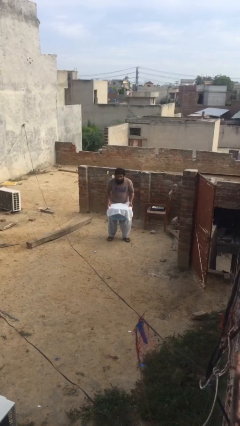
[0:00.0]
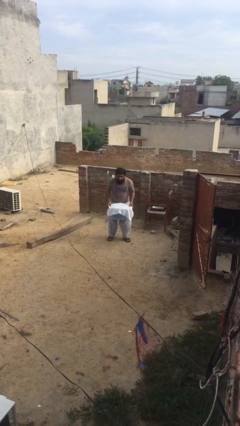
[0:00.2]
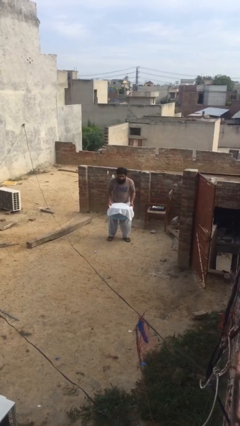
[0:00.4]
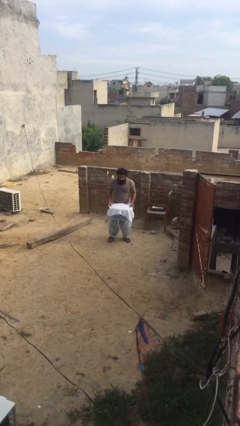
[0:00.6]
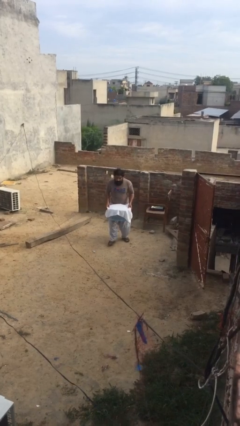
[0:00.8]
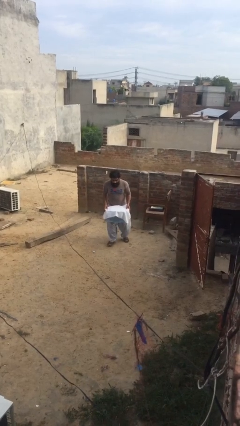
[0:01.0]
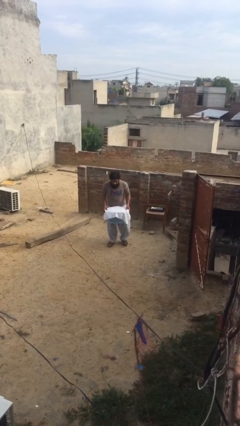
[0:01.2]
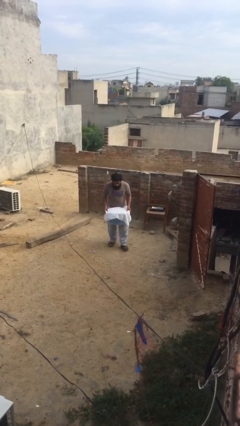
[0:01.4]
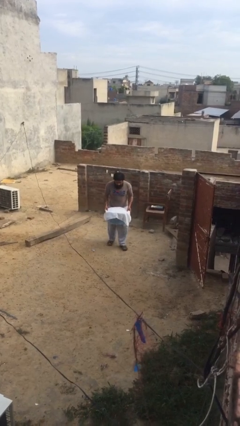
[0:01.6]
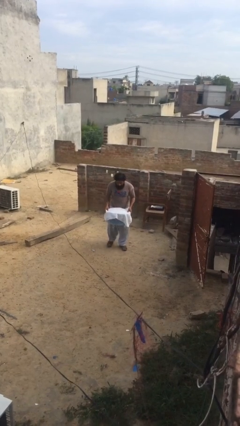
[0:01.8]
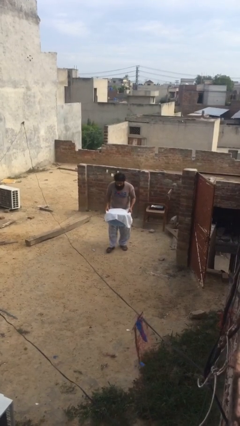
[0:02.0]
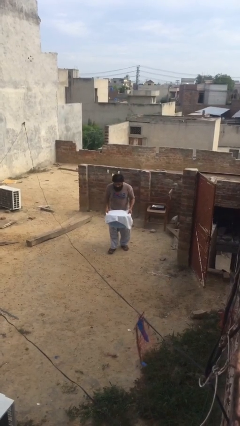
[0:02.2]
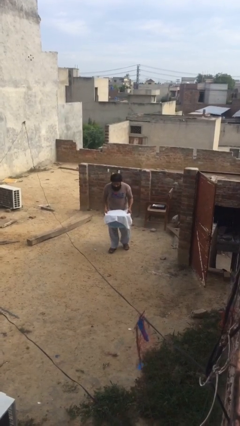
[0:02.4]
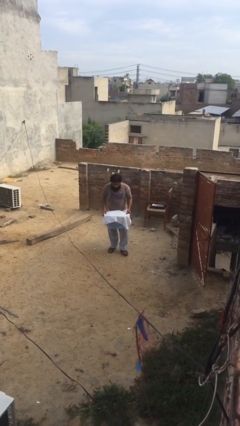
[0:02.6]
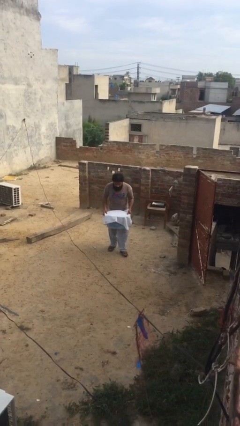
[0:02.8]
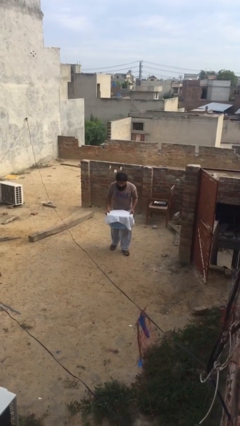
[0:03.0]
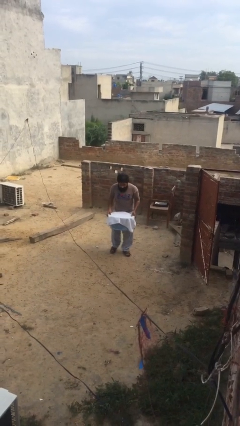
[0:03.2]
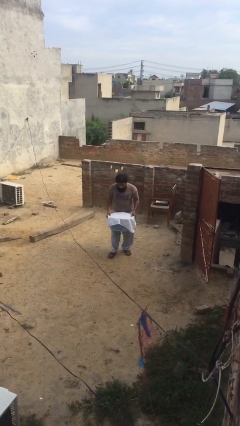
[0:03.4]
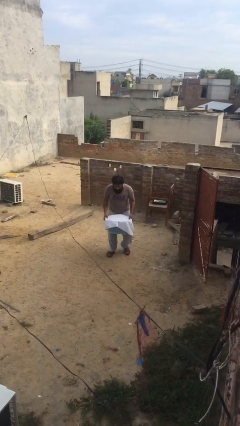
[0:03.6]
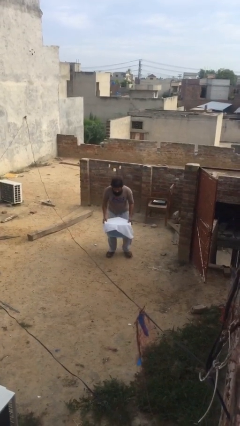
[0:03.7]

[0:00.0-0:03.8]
person carries heavy object

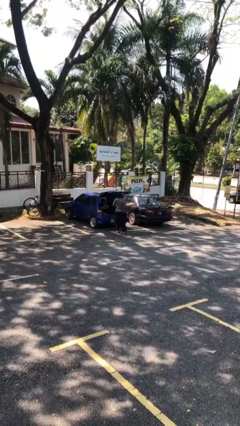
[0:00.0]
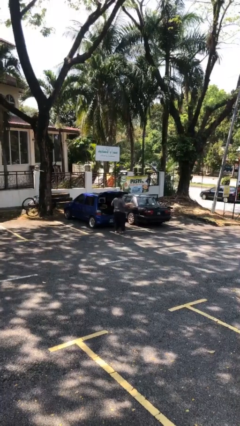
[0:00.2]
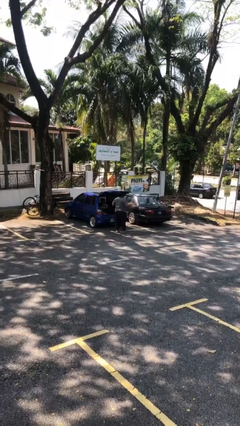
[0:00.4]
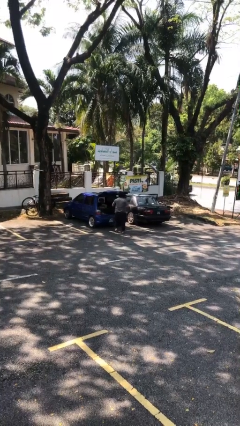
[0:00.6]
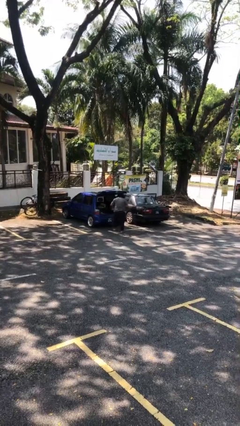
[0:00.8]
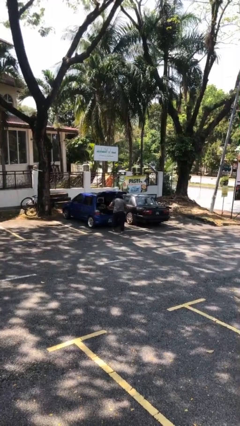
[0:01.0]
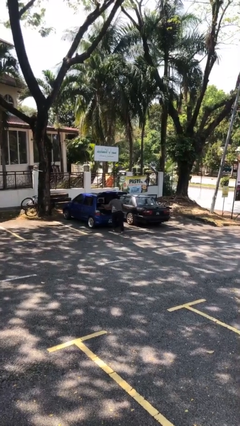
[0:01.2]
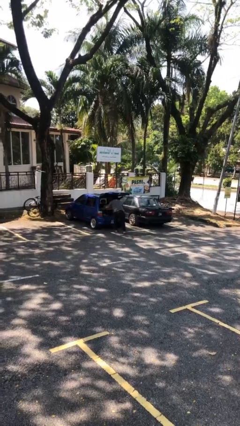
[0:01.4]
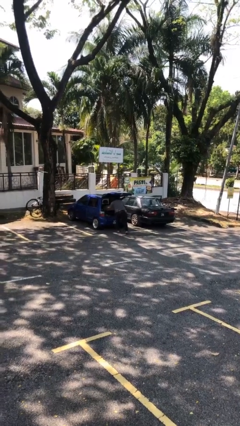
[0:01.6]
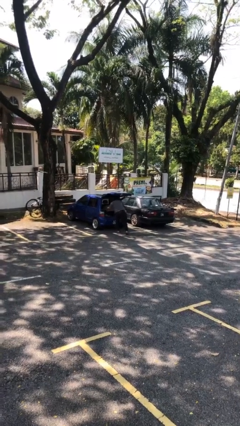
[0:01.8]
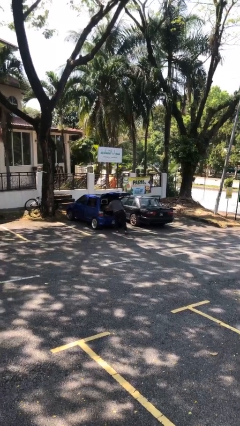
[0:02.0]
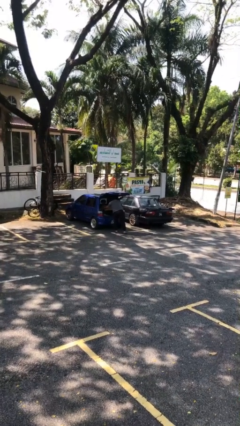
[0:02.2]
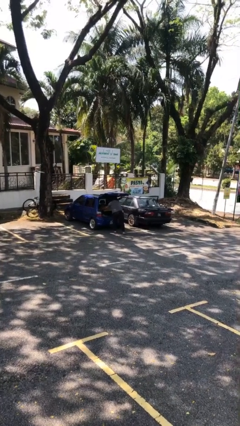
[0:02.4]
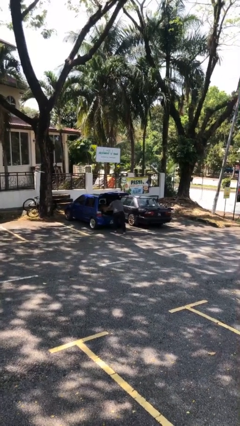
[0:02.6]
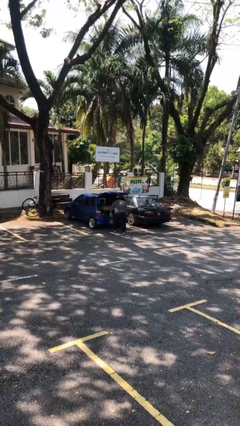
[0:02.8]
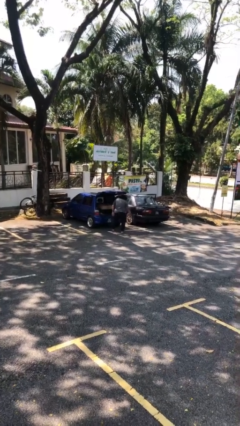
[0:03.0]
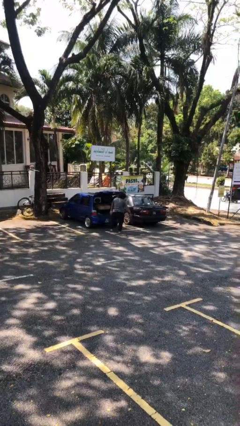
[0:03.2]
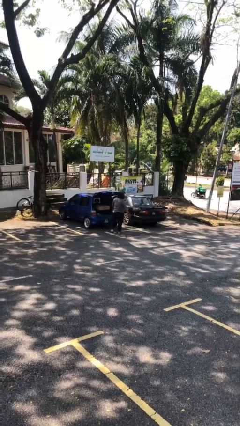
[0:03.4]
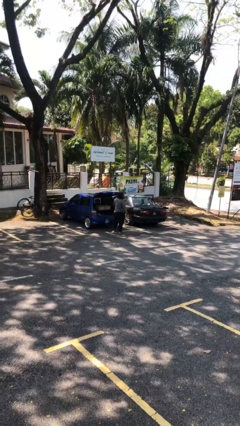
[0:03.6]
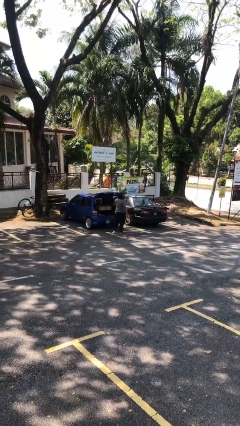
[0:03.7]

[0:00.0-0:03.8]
person loads car

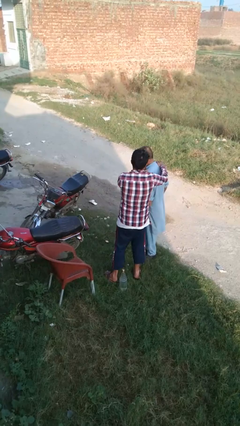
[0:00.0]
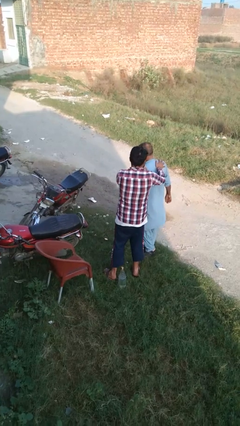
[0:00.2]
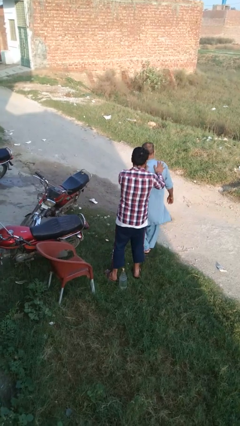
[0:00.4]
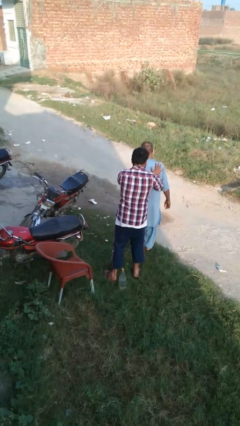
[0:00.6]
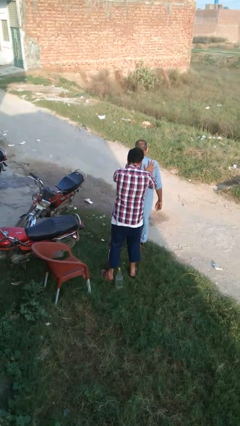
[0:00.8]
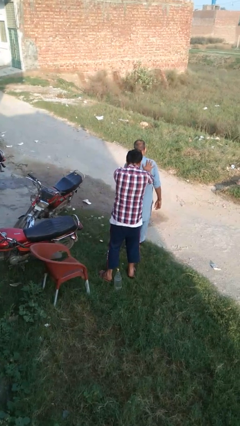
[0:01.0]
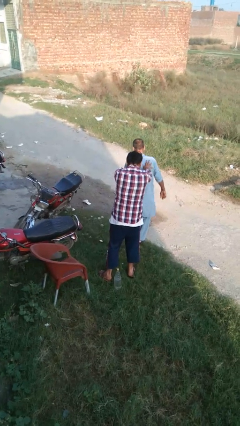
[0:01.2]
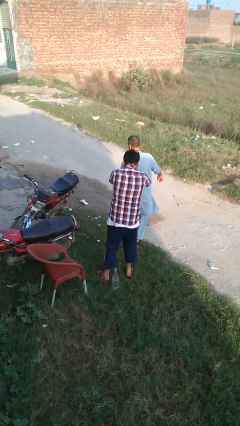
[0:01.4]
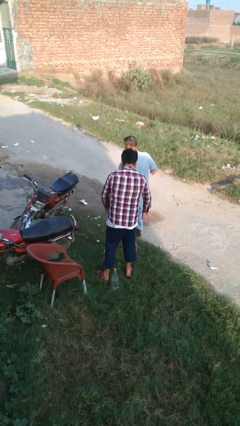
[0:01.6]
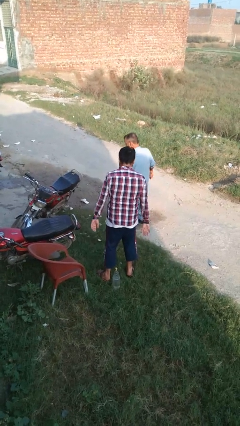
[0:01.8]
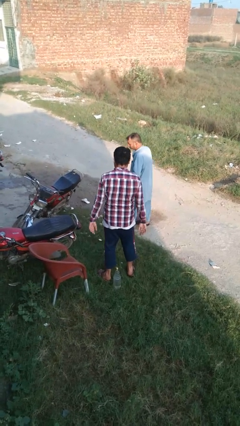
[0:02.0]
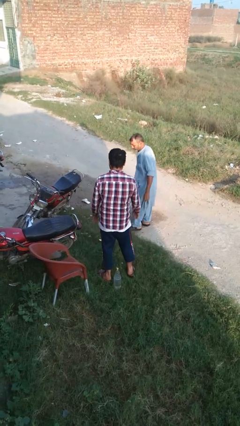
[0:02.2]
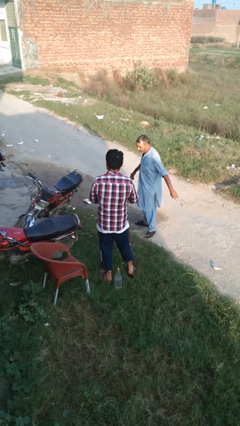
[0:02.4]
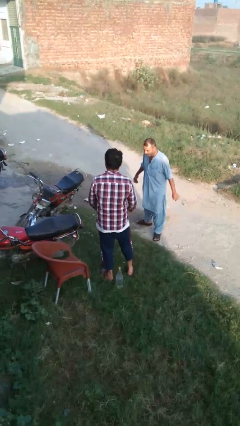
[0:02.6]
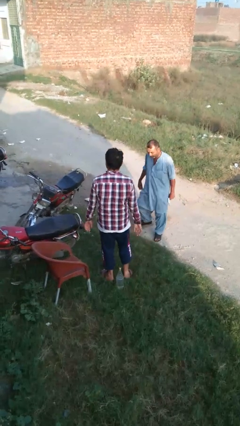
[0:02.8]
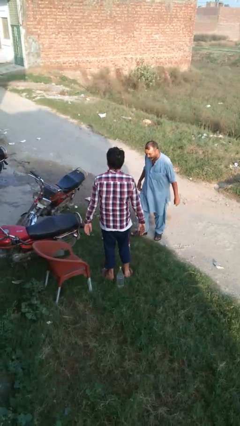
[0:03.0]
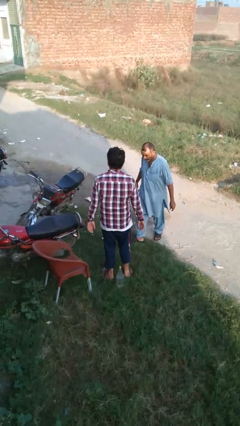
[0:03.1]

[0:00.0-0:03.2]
person spins person around

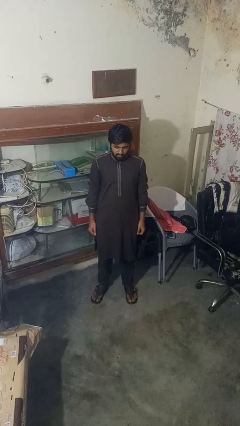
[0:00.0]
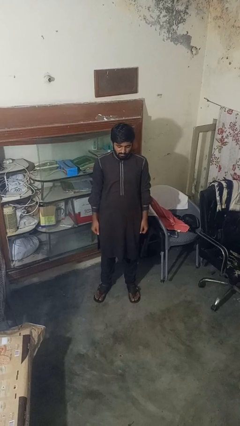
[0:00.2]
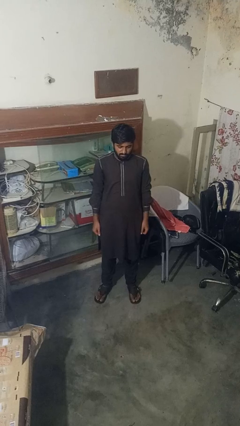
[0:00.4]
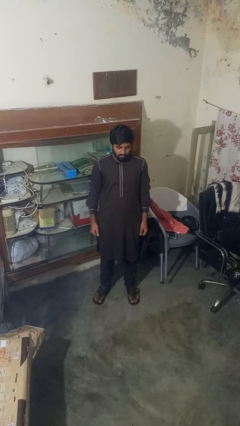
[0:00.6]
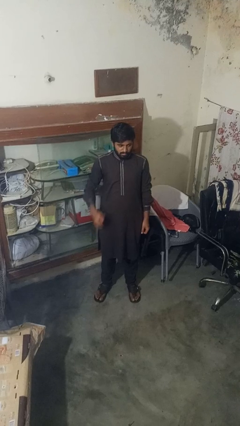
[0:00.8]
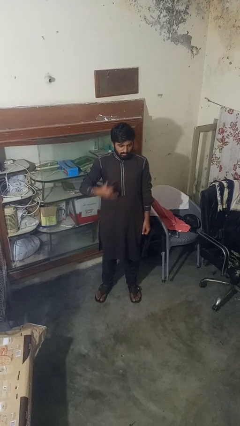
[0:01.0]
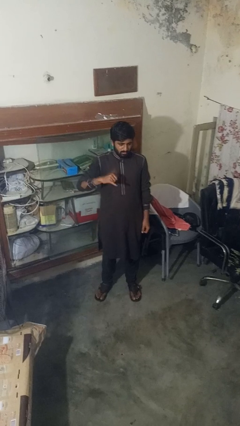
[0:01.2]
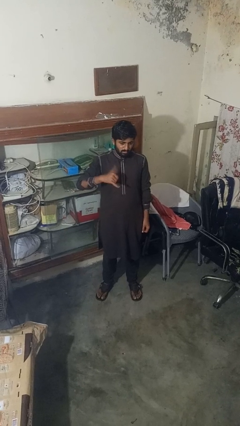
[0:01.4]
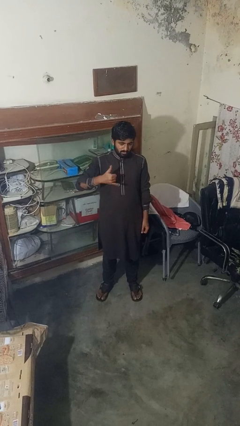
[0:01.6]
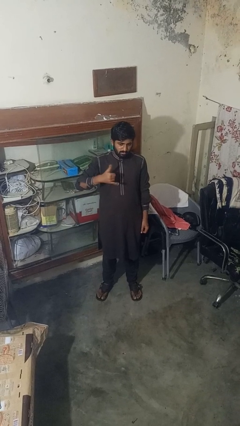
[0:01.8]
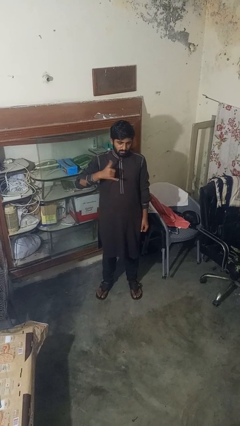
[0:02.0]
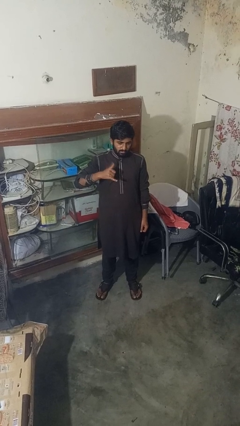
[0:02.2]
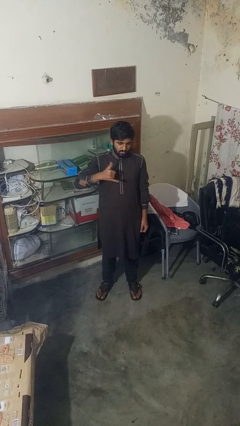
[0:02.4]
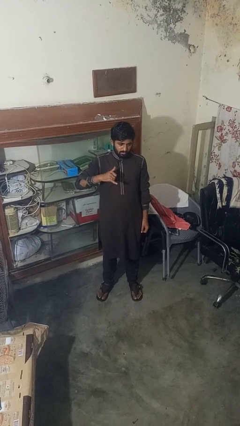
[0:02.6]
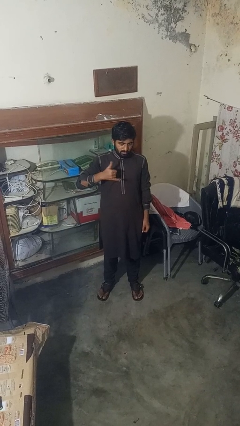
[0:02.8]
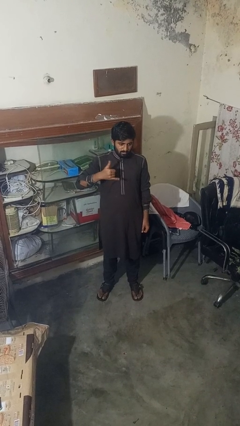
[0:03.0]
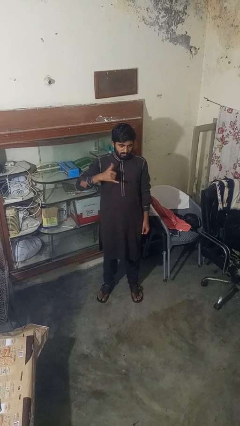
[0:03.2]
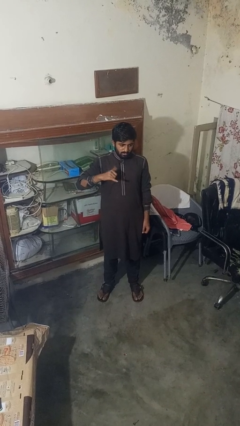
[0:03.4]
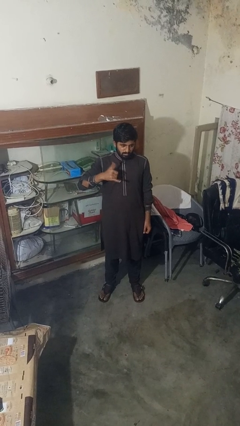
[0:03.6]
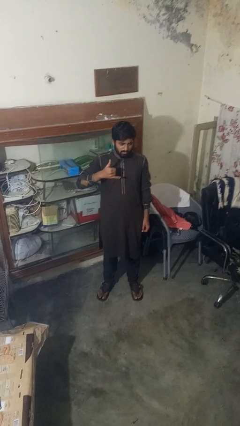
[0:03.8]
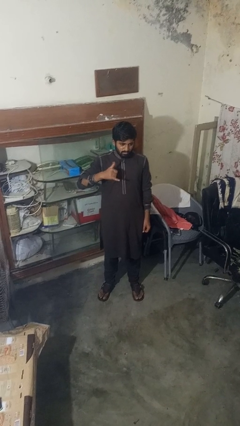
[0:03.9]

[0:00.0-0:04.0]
person gestures hang loose

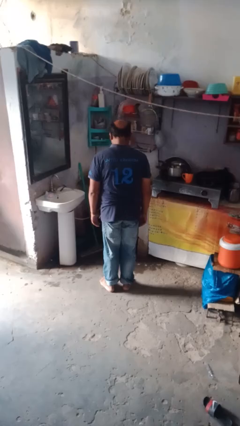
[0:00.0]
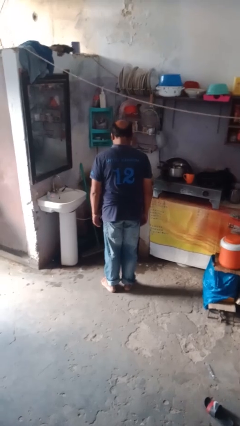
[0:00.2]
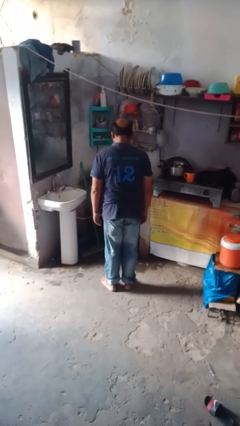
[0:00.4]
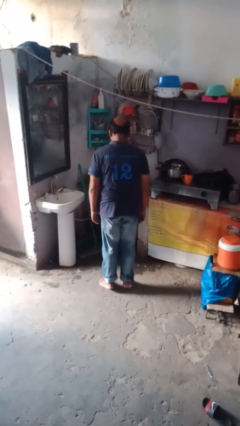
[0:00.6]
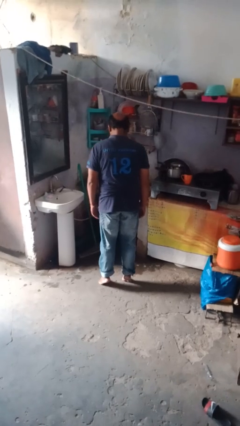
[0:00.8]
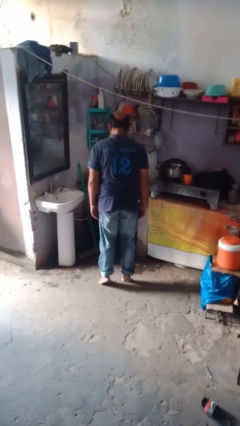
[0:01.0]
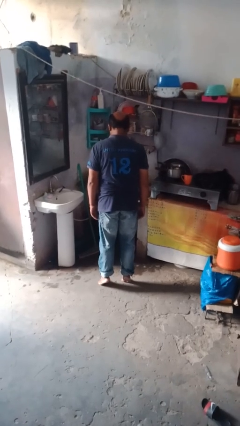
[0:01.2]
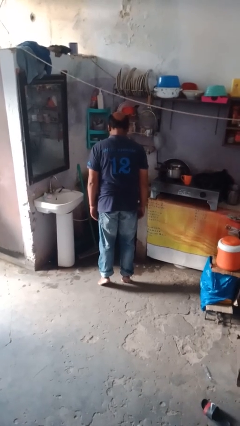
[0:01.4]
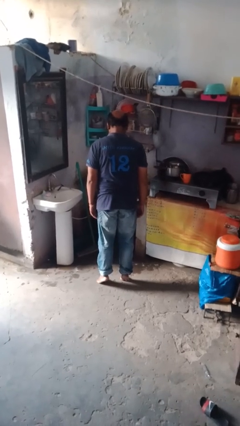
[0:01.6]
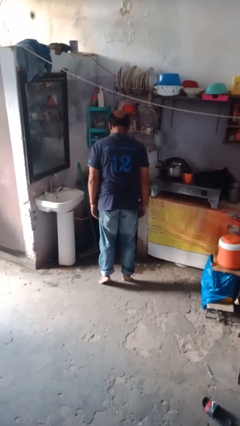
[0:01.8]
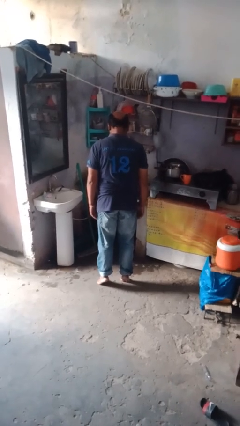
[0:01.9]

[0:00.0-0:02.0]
person walks tiptoe

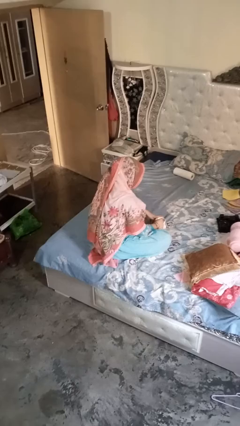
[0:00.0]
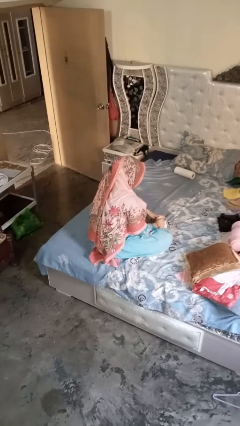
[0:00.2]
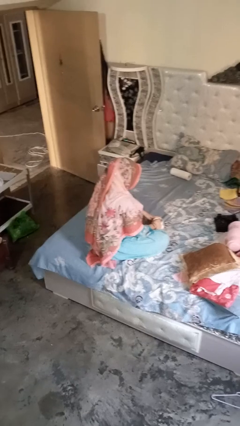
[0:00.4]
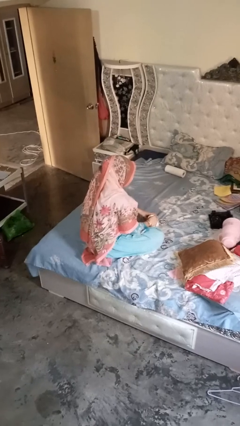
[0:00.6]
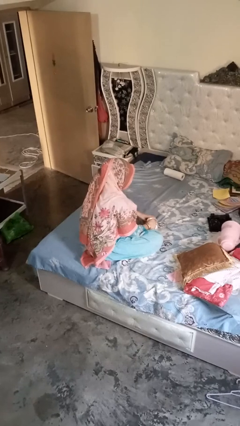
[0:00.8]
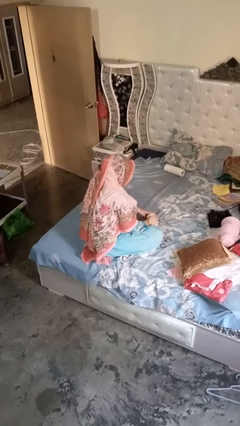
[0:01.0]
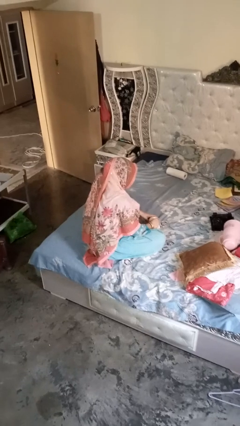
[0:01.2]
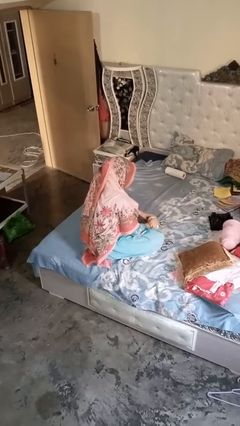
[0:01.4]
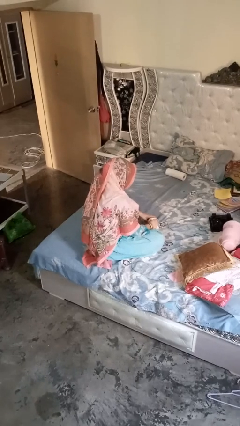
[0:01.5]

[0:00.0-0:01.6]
person stirs mug
